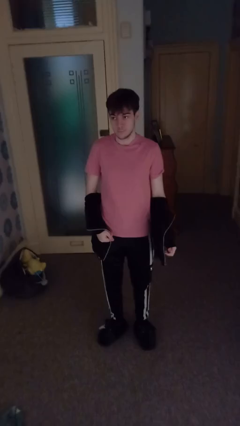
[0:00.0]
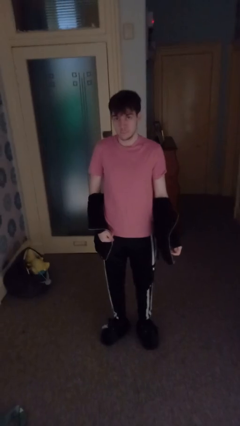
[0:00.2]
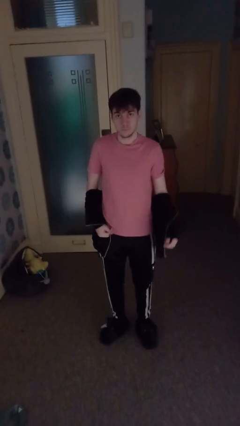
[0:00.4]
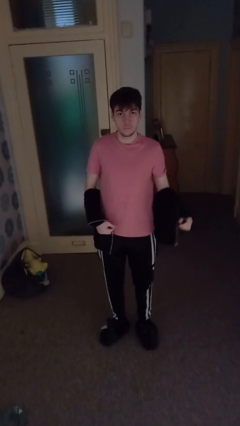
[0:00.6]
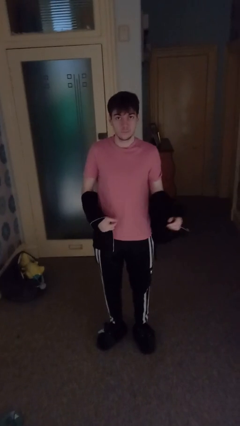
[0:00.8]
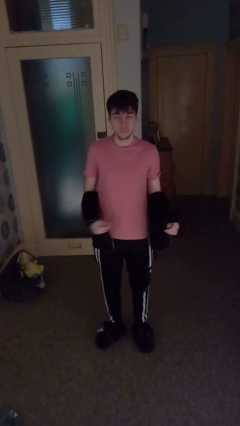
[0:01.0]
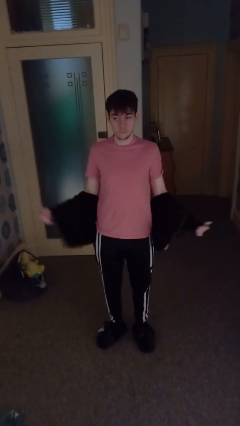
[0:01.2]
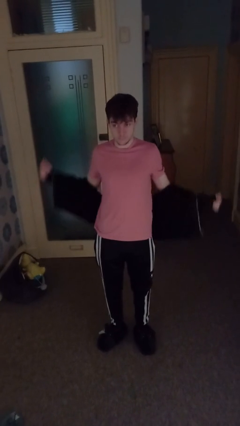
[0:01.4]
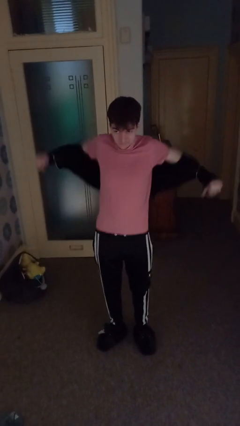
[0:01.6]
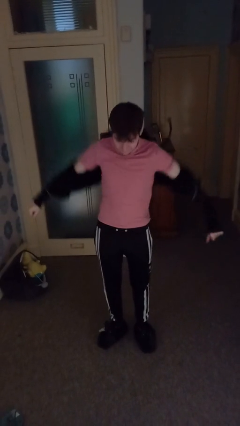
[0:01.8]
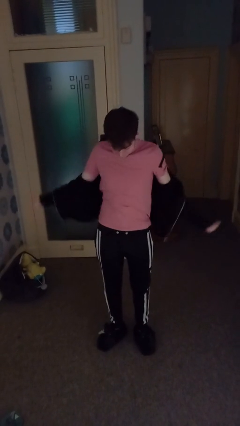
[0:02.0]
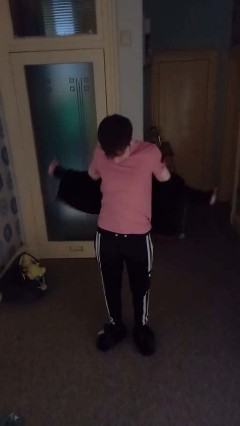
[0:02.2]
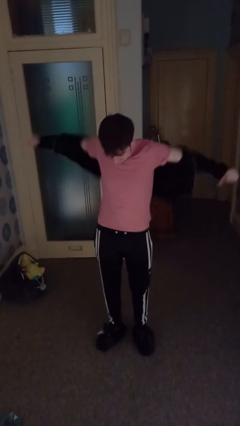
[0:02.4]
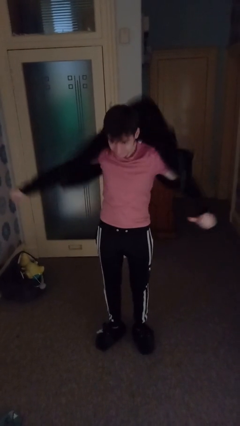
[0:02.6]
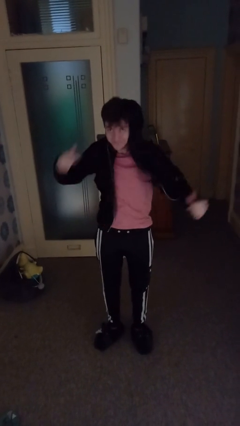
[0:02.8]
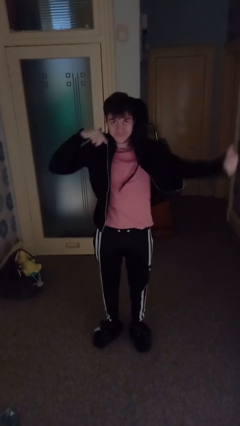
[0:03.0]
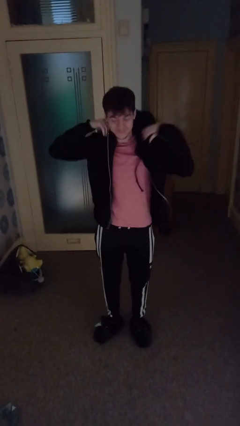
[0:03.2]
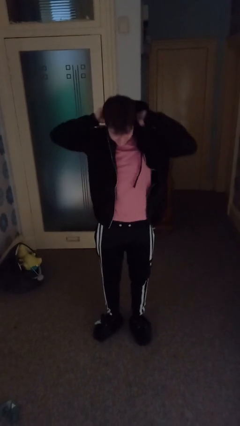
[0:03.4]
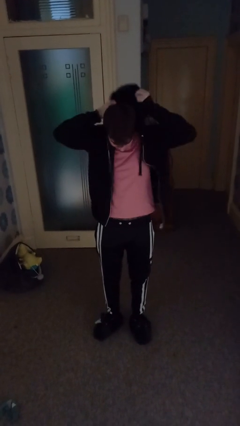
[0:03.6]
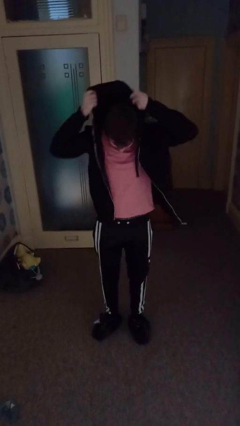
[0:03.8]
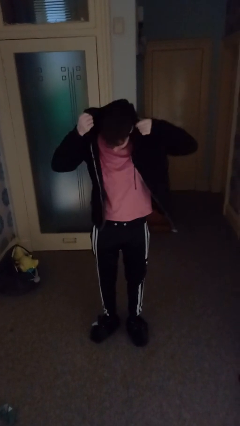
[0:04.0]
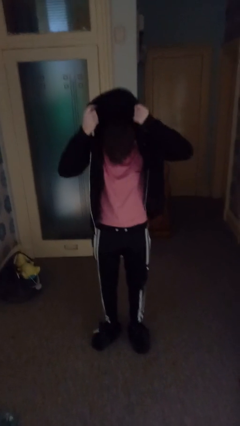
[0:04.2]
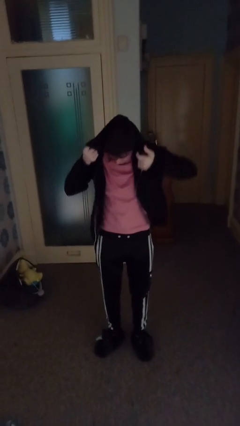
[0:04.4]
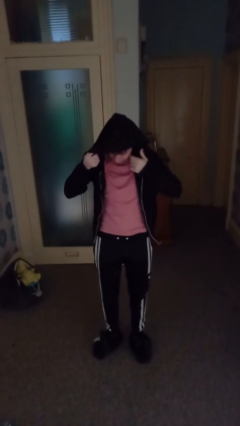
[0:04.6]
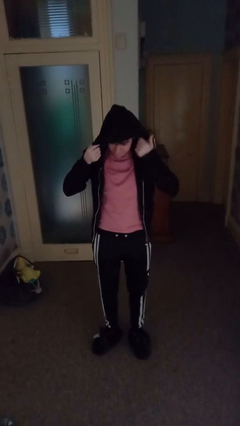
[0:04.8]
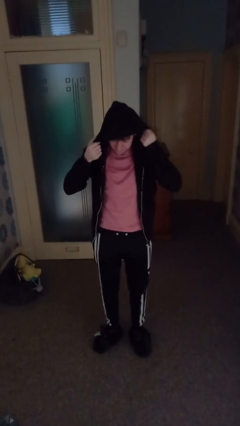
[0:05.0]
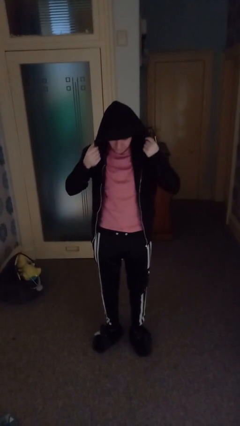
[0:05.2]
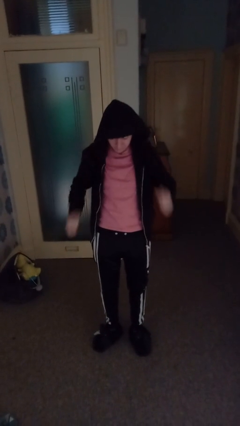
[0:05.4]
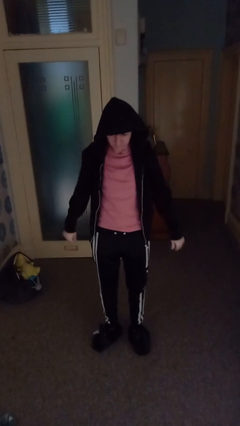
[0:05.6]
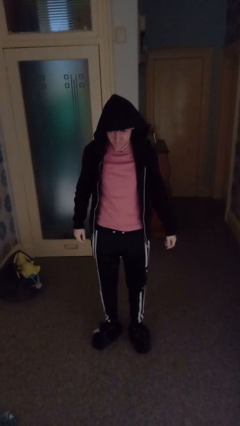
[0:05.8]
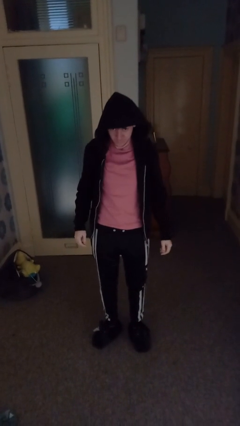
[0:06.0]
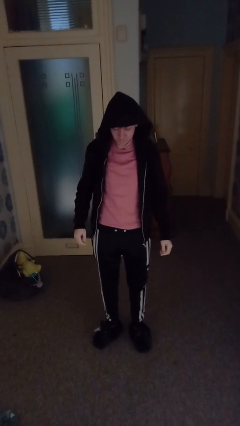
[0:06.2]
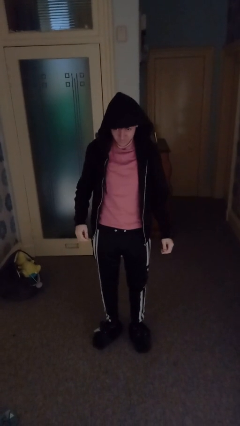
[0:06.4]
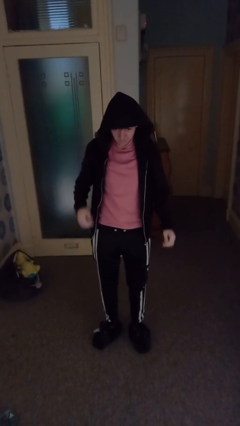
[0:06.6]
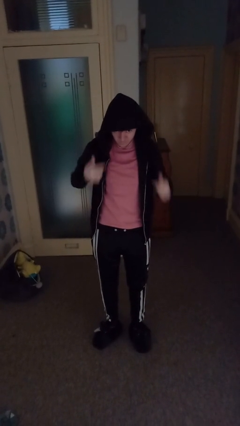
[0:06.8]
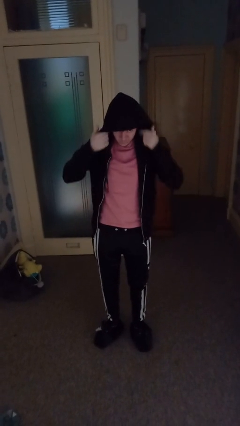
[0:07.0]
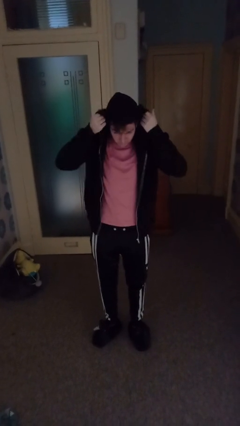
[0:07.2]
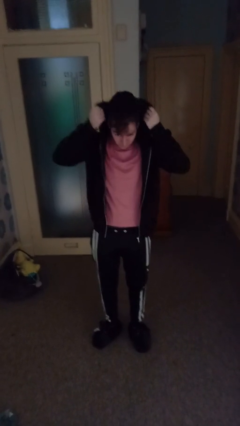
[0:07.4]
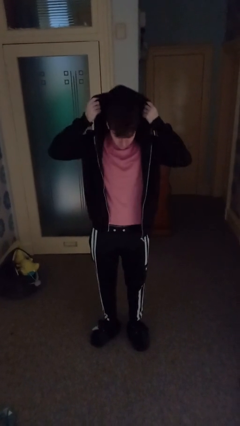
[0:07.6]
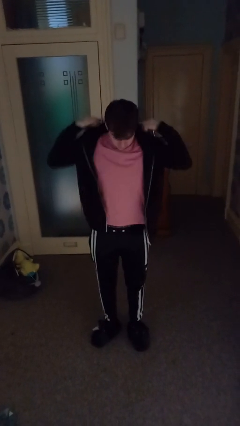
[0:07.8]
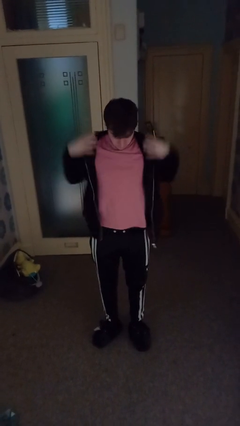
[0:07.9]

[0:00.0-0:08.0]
person puts on hoodie

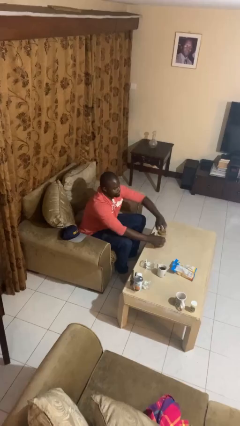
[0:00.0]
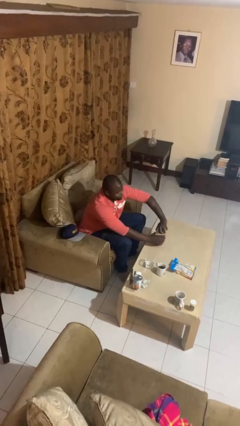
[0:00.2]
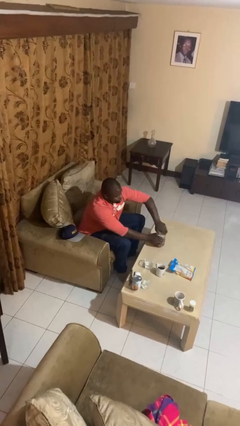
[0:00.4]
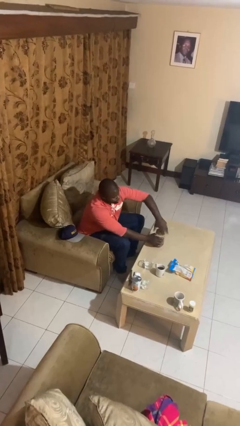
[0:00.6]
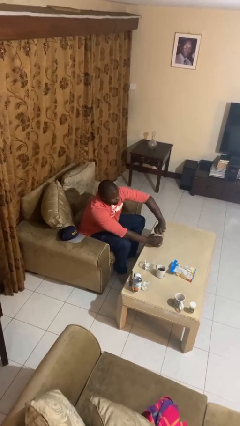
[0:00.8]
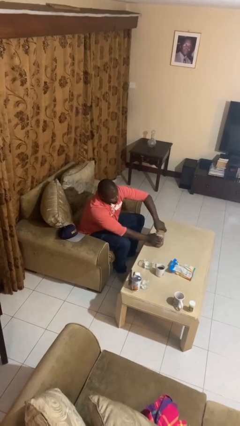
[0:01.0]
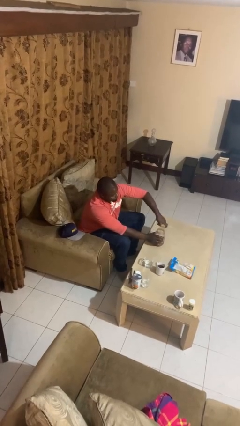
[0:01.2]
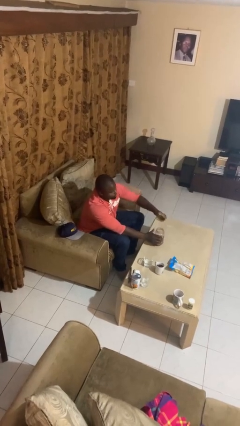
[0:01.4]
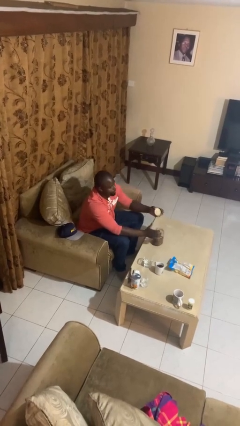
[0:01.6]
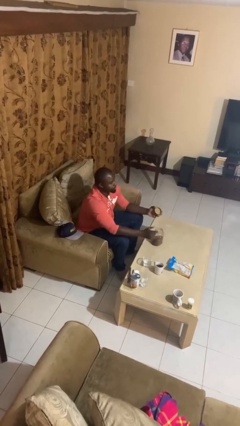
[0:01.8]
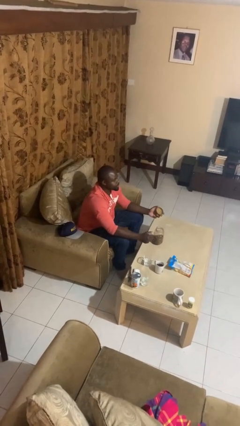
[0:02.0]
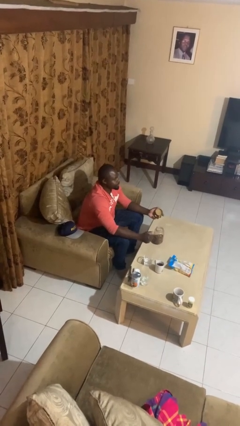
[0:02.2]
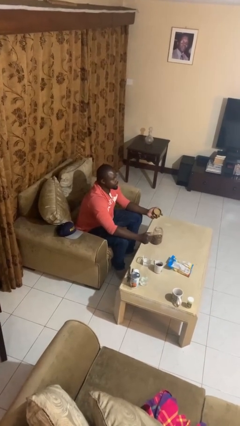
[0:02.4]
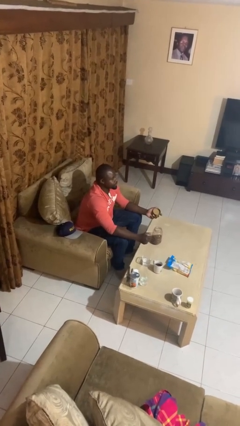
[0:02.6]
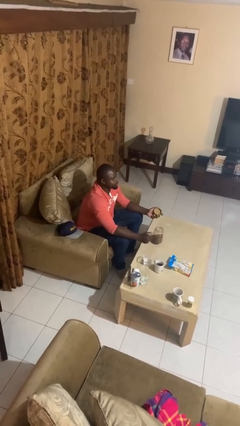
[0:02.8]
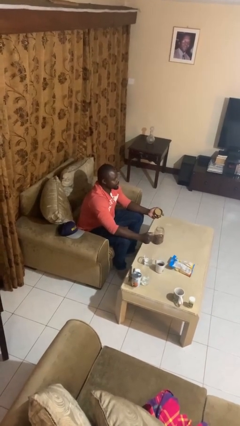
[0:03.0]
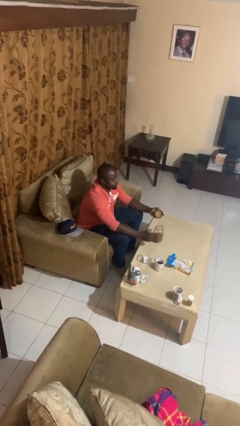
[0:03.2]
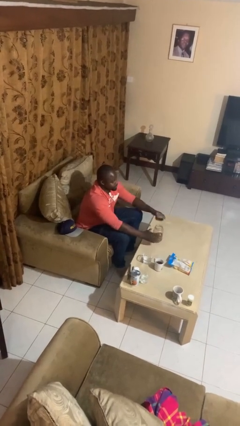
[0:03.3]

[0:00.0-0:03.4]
person opens jar

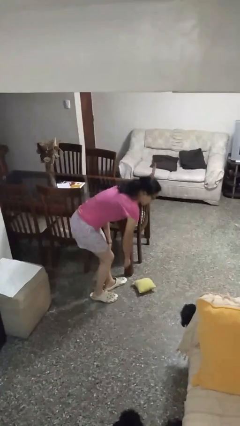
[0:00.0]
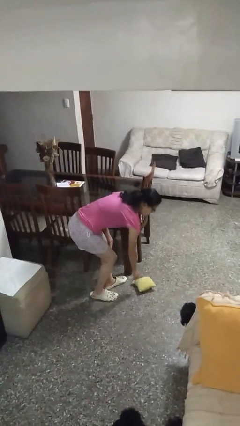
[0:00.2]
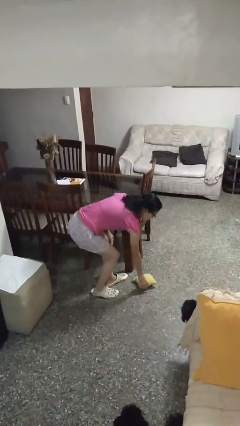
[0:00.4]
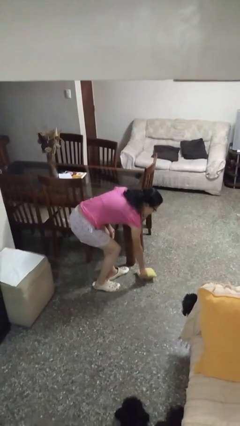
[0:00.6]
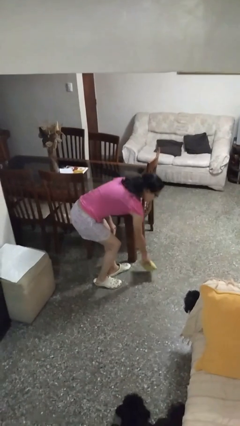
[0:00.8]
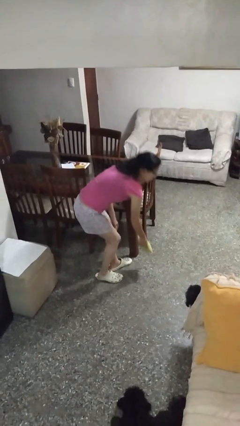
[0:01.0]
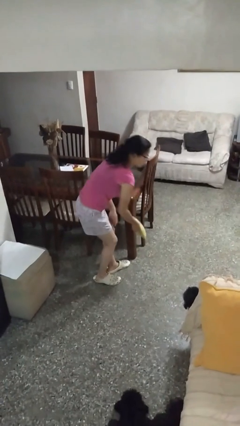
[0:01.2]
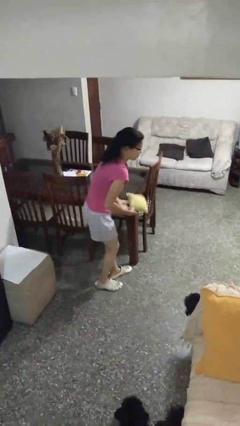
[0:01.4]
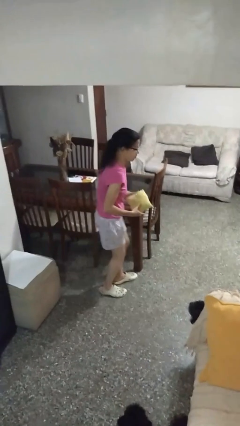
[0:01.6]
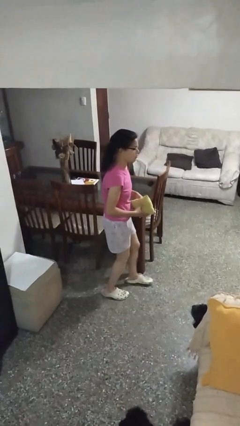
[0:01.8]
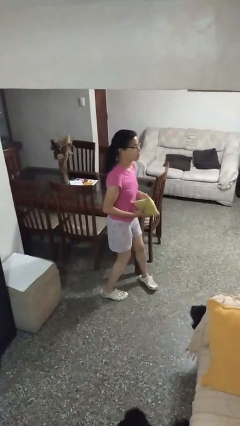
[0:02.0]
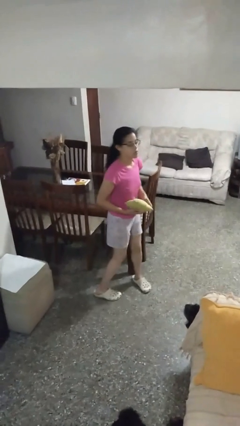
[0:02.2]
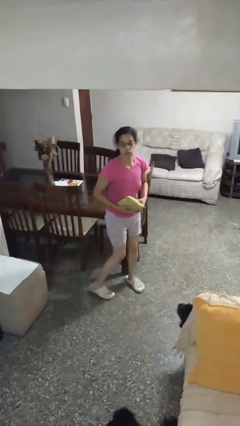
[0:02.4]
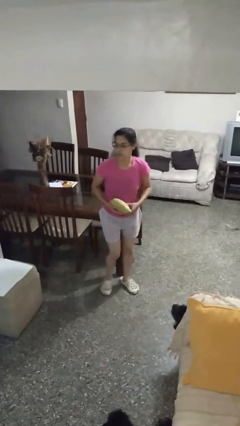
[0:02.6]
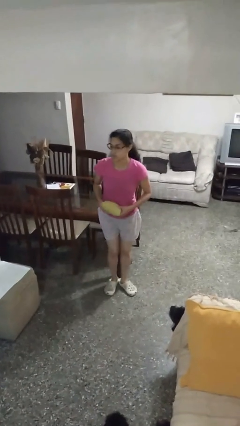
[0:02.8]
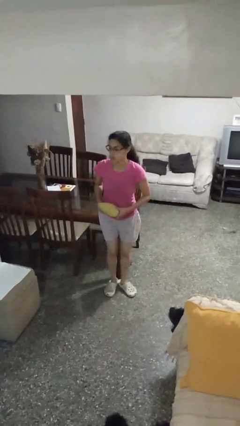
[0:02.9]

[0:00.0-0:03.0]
person picks up object from floor

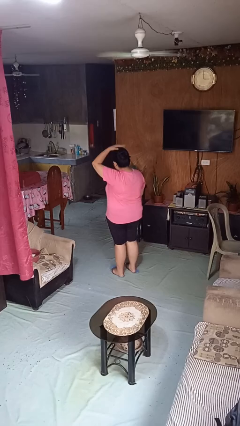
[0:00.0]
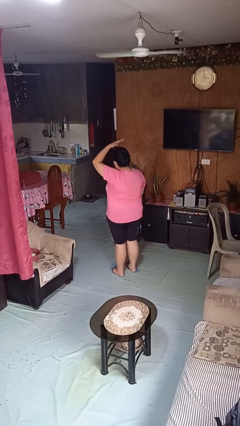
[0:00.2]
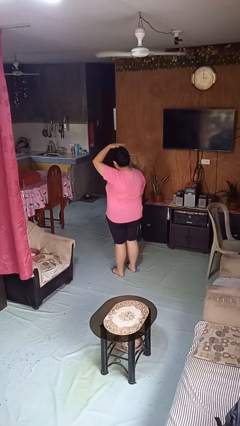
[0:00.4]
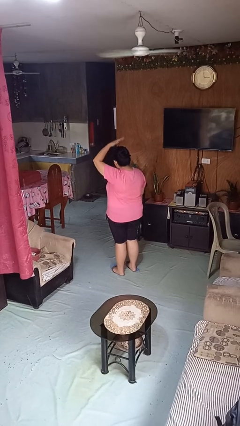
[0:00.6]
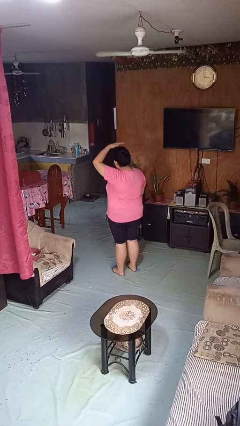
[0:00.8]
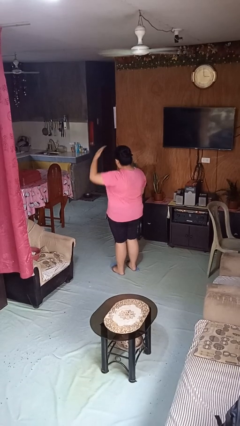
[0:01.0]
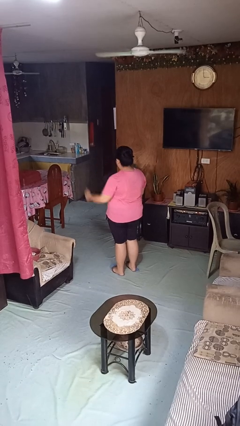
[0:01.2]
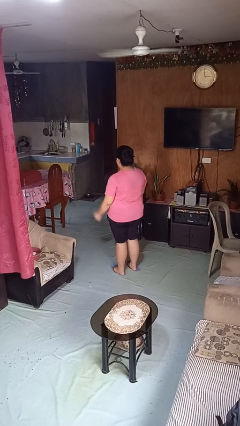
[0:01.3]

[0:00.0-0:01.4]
person pats head

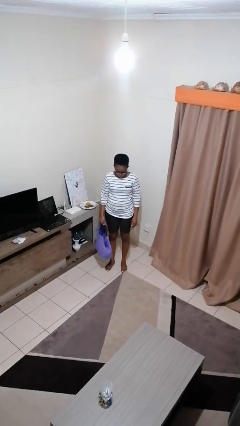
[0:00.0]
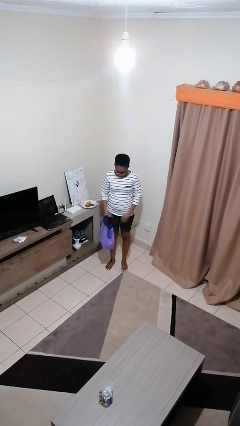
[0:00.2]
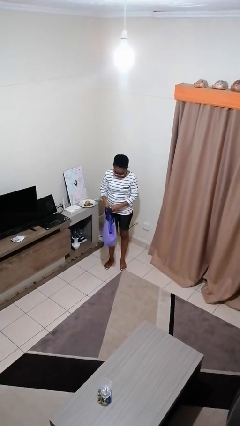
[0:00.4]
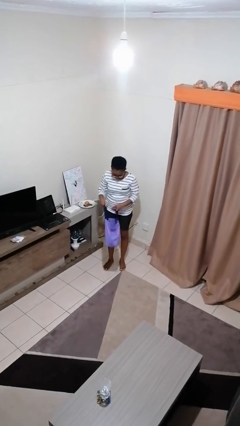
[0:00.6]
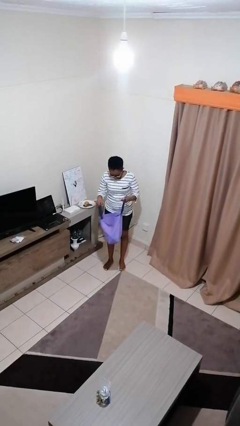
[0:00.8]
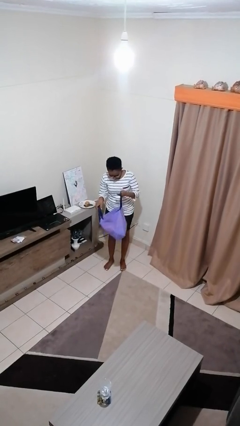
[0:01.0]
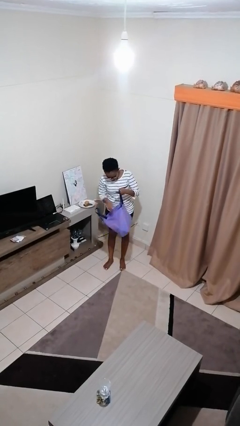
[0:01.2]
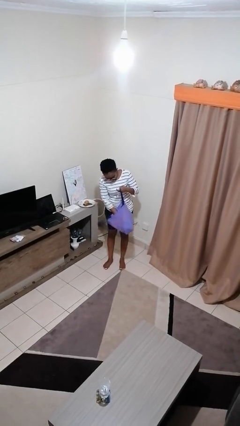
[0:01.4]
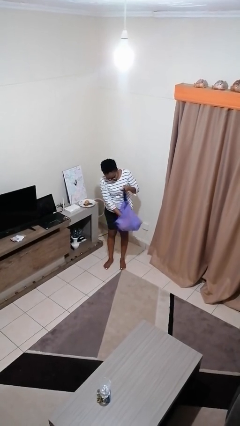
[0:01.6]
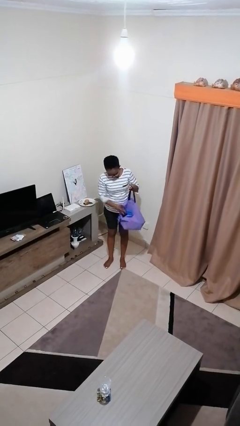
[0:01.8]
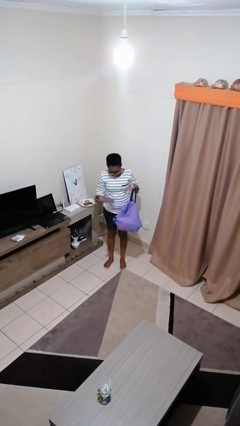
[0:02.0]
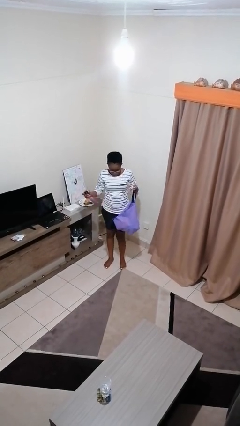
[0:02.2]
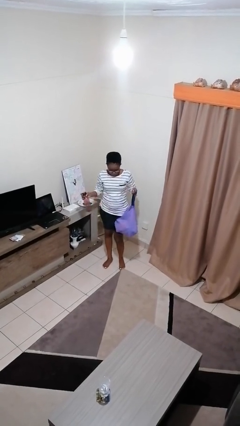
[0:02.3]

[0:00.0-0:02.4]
person takes object from bag
